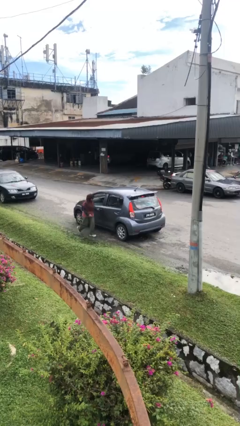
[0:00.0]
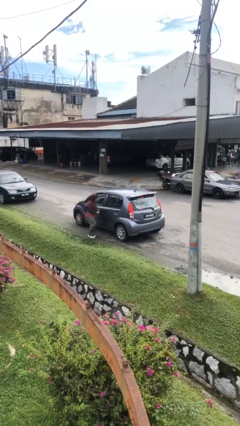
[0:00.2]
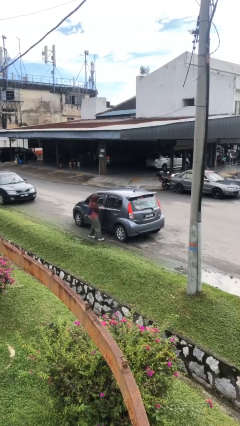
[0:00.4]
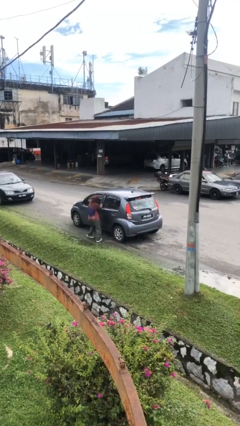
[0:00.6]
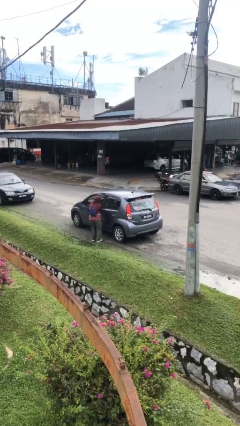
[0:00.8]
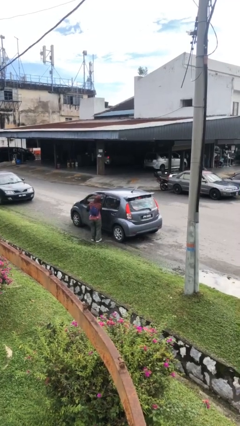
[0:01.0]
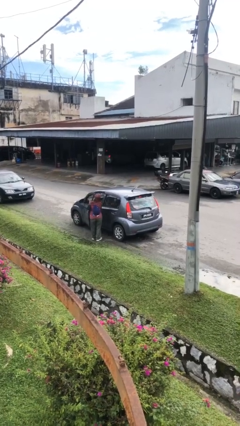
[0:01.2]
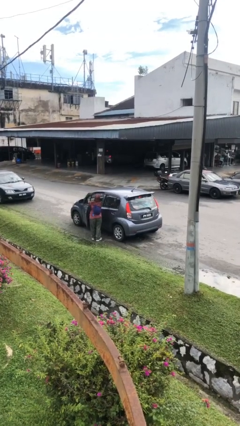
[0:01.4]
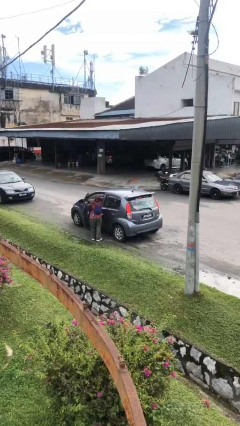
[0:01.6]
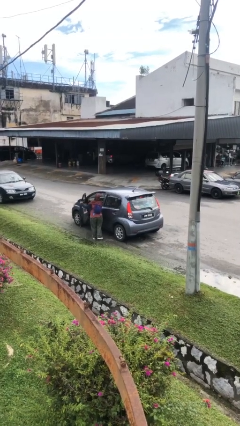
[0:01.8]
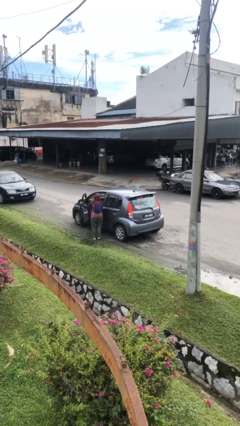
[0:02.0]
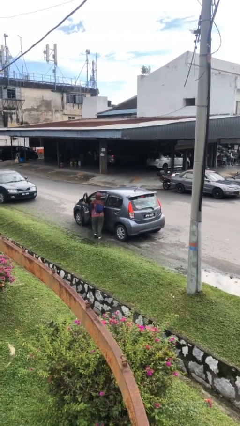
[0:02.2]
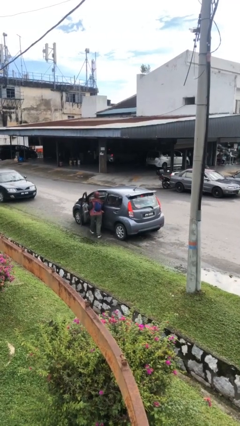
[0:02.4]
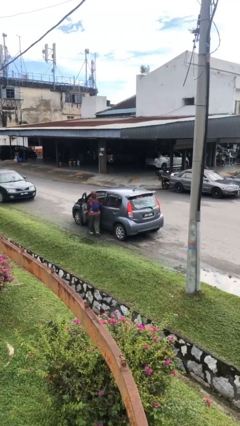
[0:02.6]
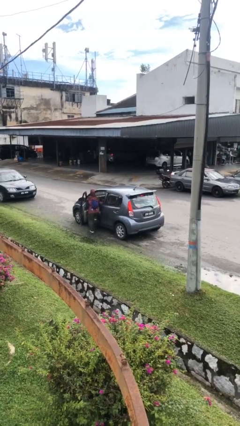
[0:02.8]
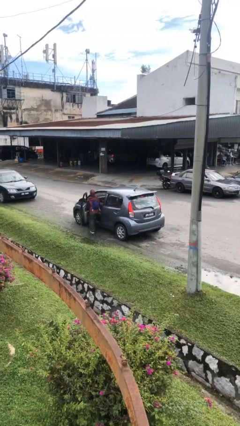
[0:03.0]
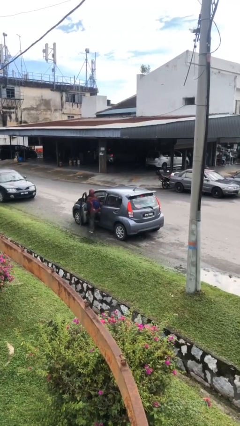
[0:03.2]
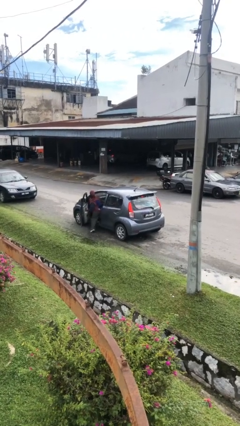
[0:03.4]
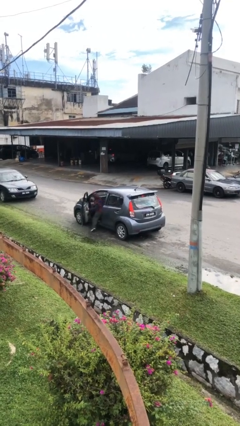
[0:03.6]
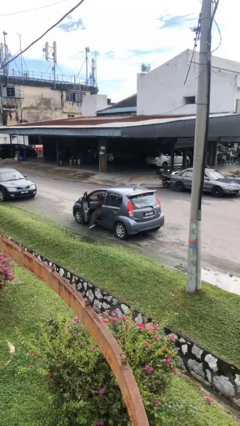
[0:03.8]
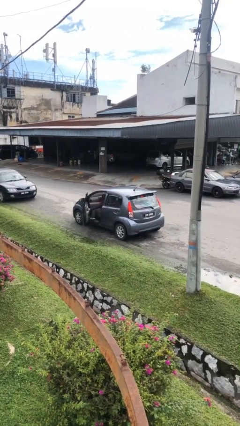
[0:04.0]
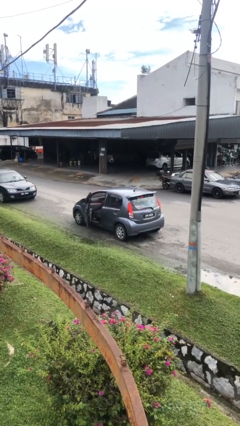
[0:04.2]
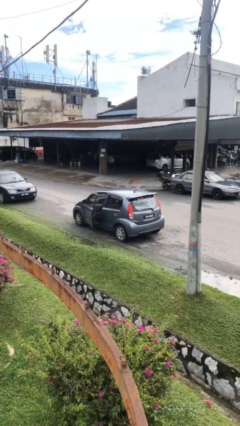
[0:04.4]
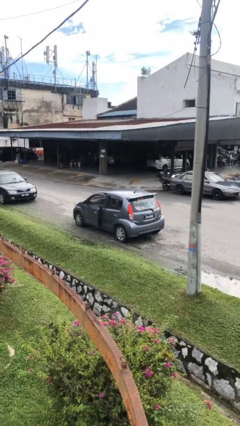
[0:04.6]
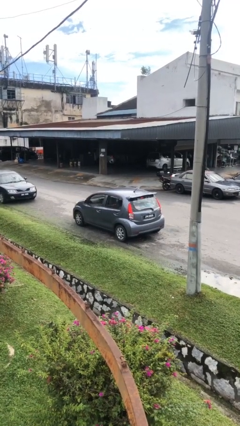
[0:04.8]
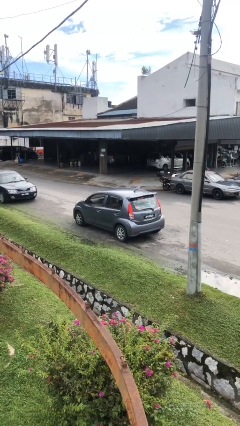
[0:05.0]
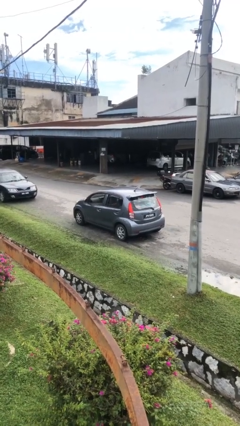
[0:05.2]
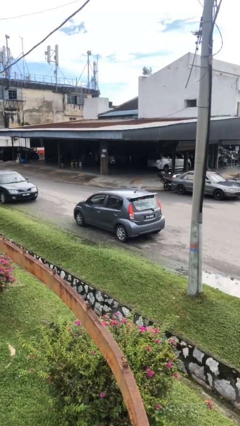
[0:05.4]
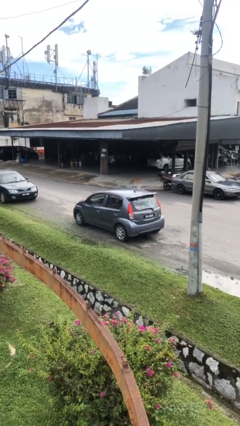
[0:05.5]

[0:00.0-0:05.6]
car picks up person

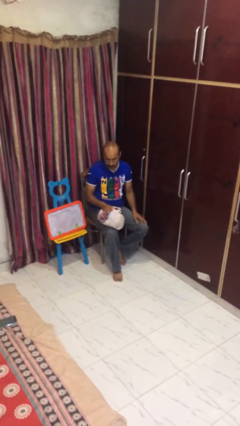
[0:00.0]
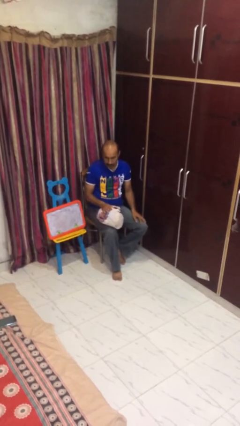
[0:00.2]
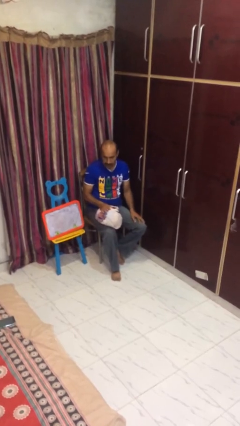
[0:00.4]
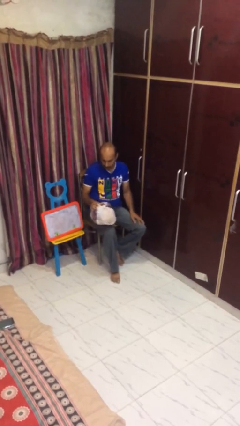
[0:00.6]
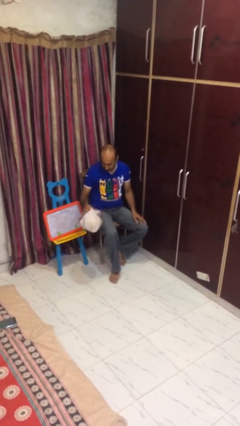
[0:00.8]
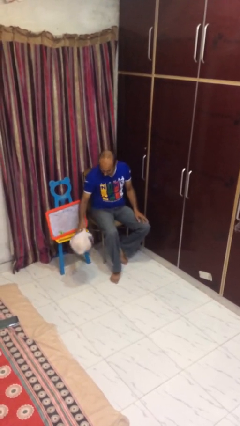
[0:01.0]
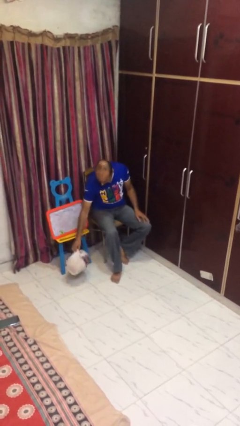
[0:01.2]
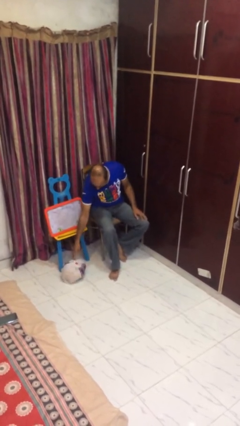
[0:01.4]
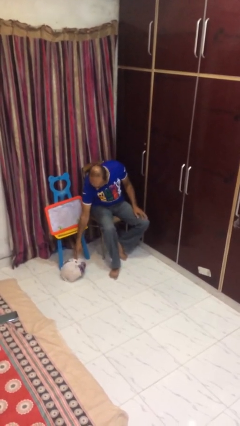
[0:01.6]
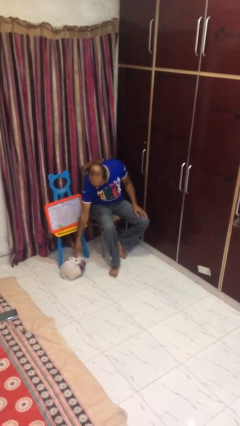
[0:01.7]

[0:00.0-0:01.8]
person puts down object on floor

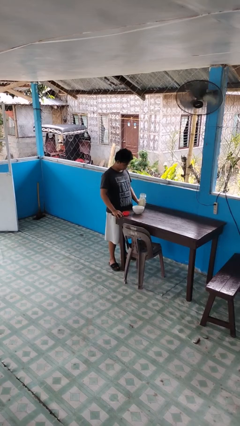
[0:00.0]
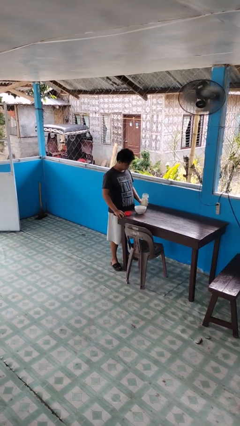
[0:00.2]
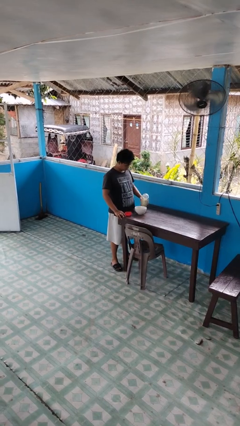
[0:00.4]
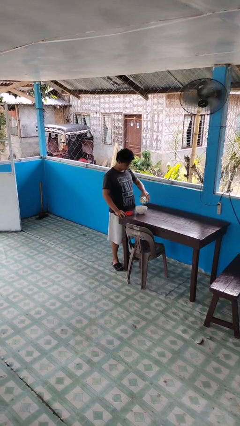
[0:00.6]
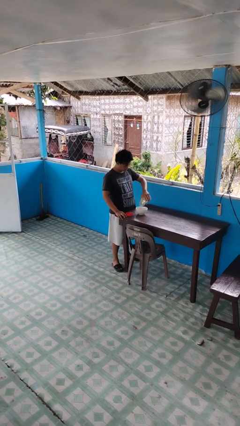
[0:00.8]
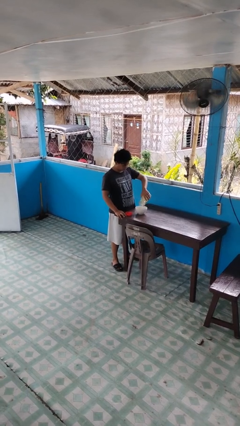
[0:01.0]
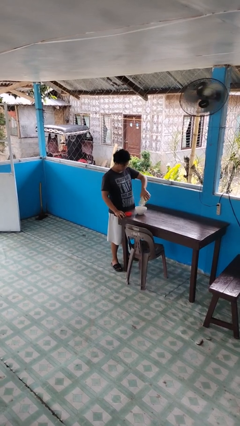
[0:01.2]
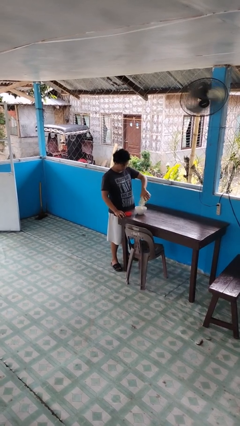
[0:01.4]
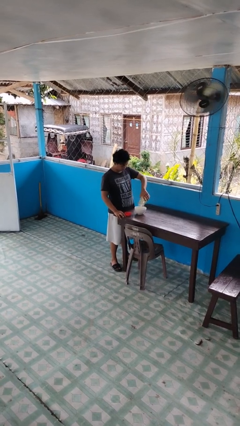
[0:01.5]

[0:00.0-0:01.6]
person pours into bowl

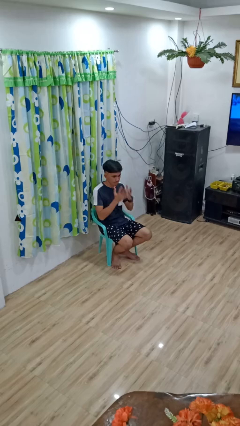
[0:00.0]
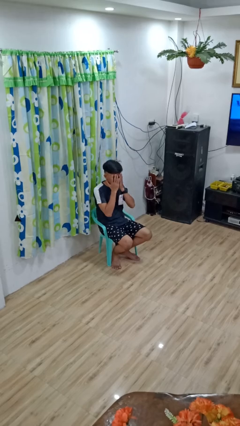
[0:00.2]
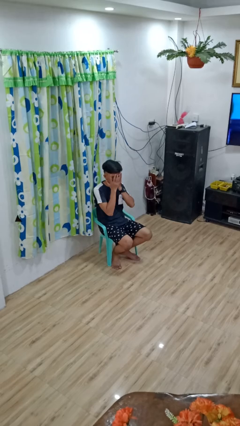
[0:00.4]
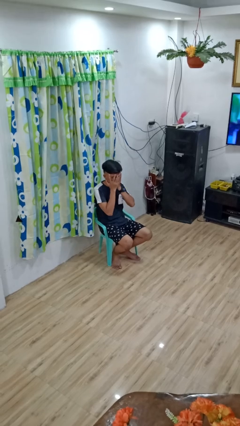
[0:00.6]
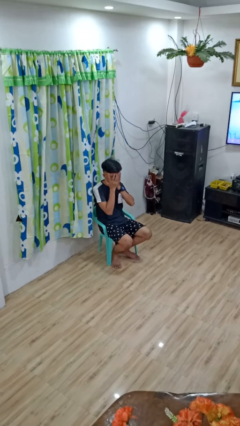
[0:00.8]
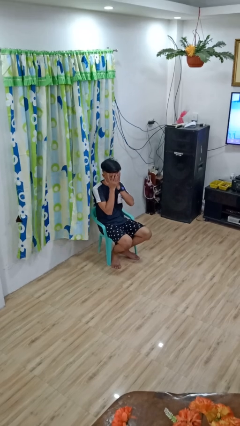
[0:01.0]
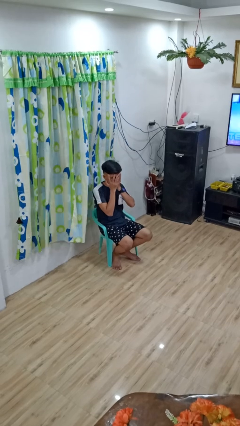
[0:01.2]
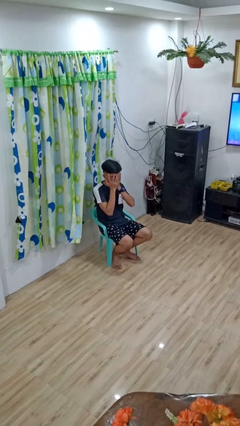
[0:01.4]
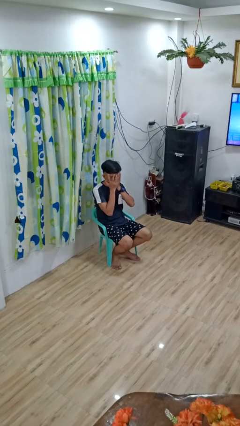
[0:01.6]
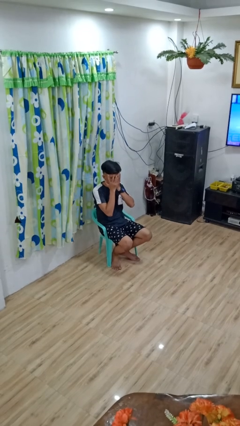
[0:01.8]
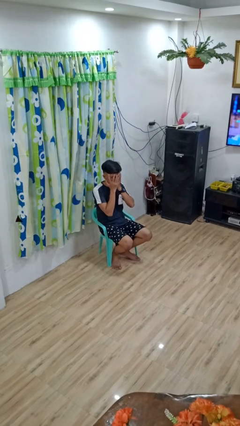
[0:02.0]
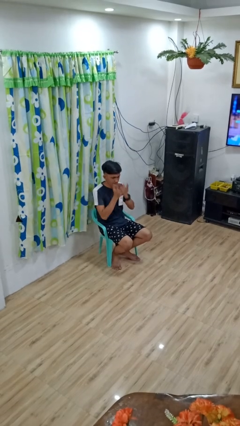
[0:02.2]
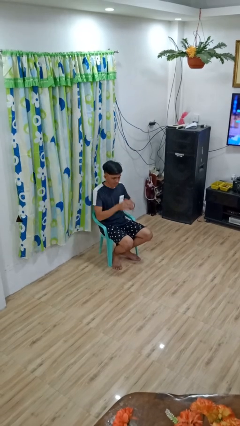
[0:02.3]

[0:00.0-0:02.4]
person covers face with hands

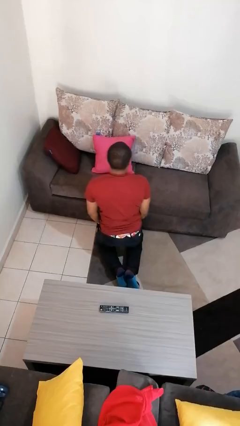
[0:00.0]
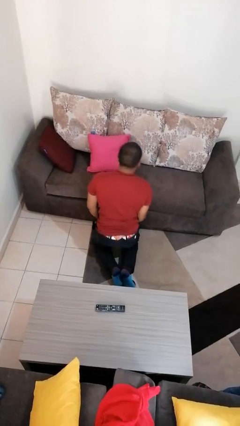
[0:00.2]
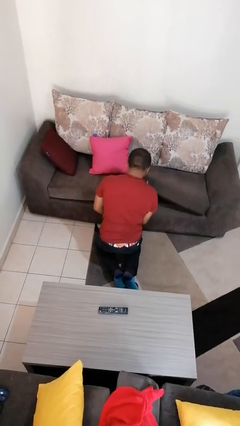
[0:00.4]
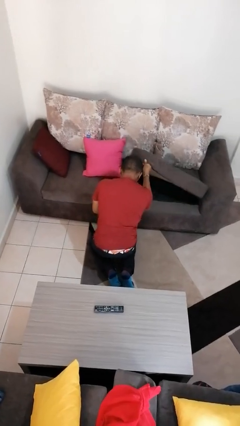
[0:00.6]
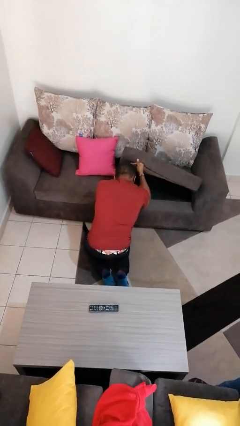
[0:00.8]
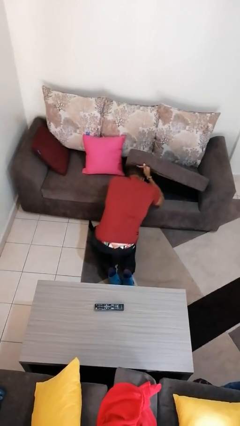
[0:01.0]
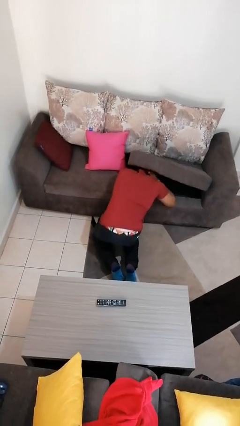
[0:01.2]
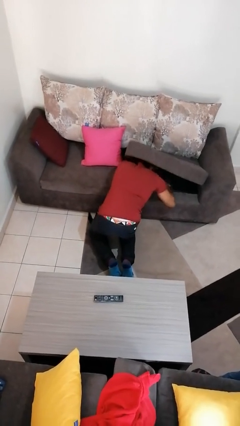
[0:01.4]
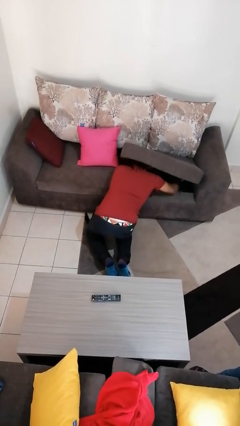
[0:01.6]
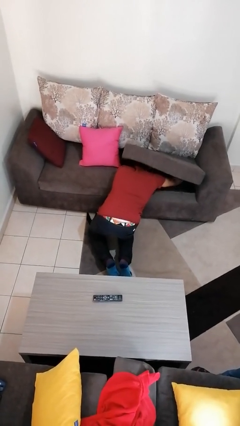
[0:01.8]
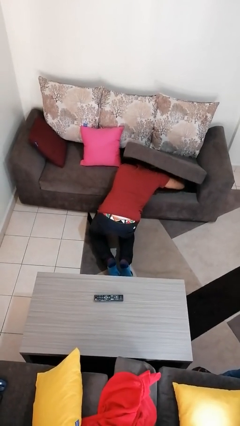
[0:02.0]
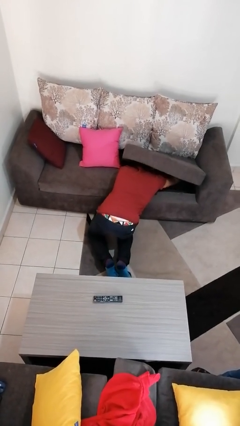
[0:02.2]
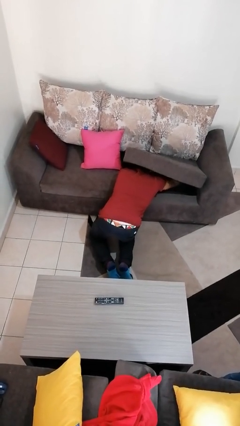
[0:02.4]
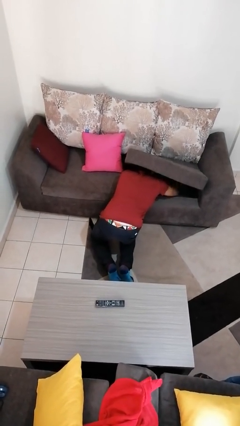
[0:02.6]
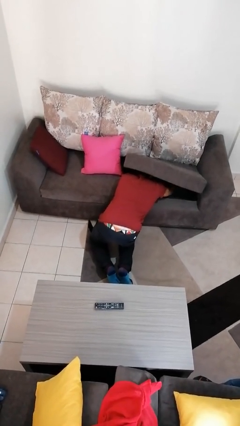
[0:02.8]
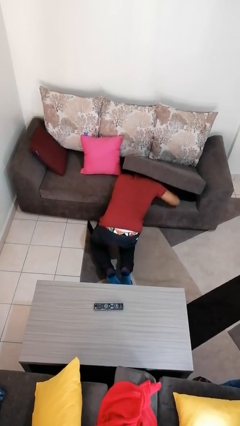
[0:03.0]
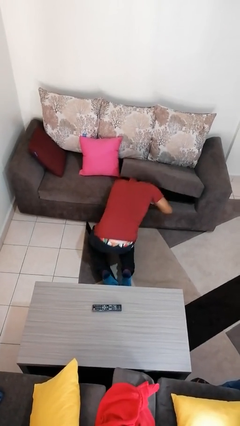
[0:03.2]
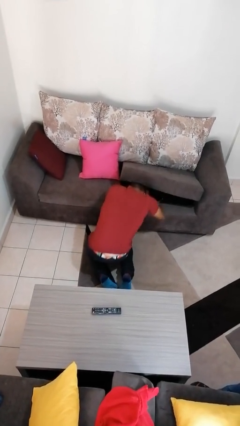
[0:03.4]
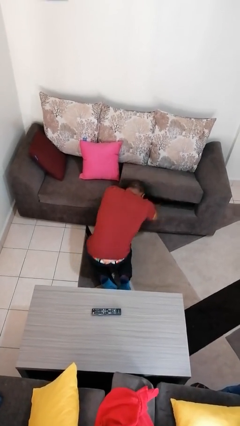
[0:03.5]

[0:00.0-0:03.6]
person searches under couch

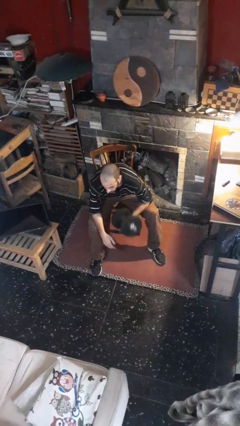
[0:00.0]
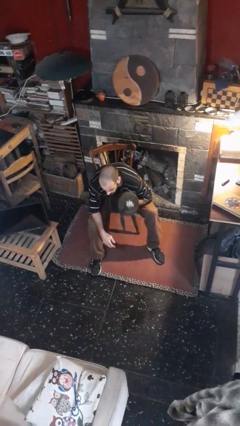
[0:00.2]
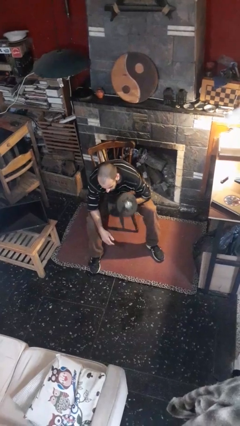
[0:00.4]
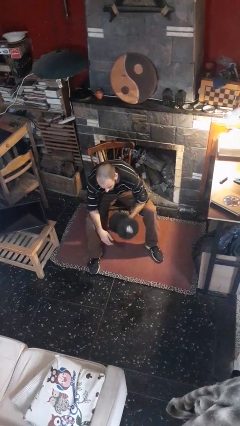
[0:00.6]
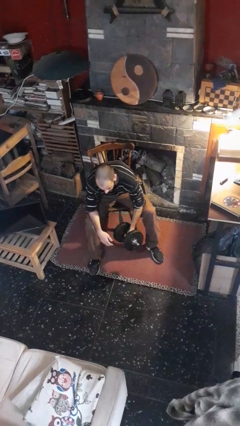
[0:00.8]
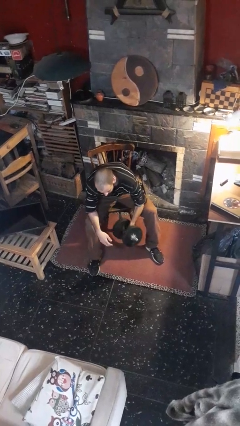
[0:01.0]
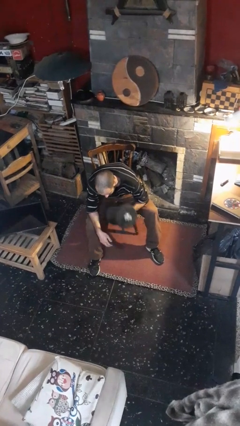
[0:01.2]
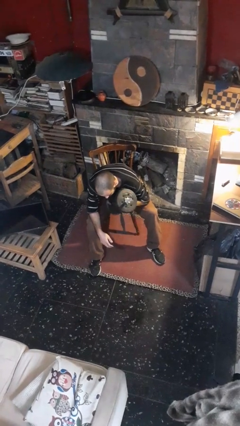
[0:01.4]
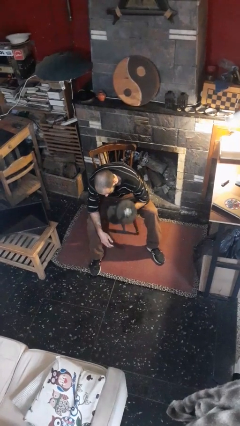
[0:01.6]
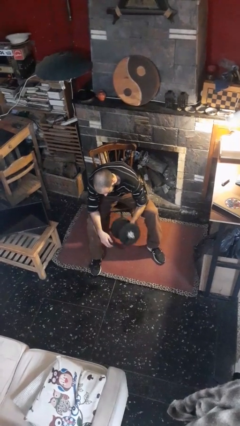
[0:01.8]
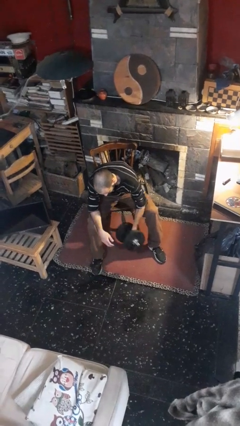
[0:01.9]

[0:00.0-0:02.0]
person lifts dumbbells

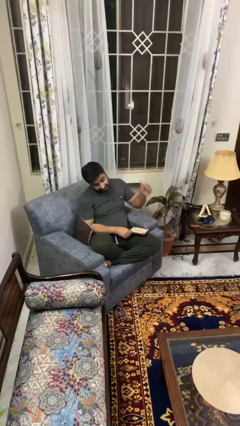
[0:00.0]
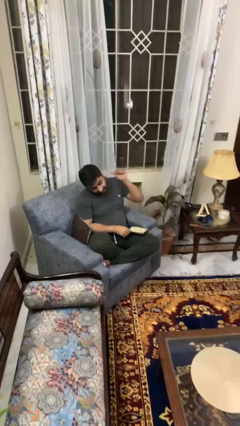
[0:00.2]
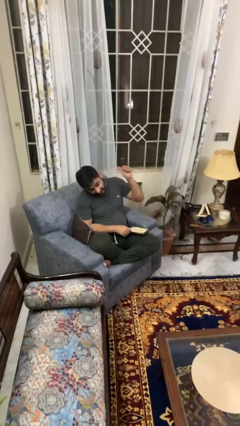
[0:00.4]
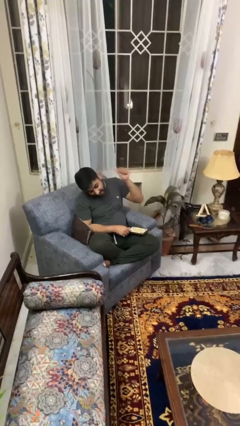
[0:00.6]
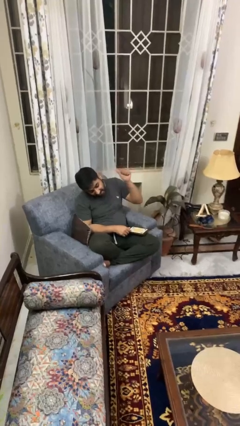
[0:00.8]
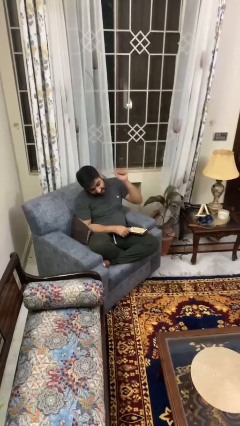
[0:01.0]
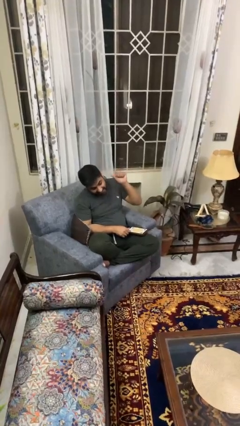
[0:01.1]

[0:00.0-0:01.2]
person gestures behind me
